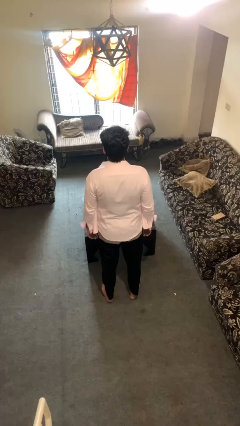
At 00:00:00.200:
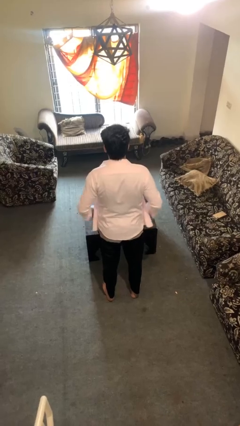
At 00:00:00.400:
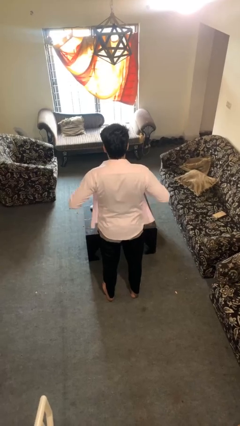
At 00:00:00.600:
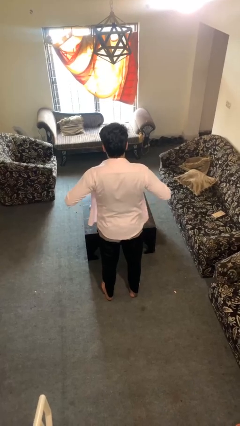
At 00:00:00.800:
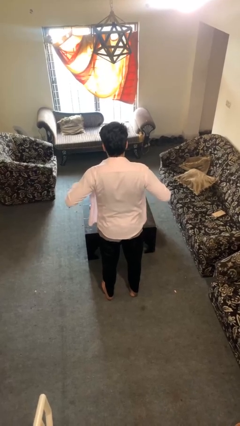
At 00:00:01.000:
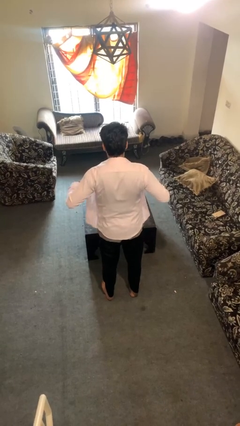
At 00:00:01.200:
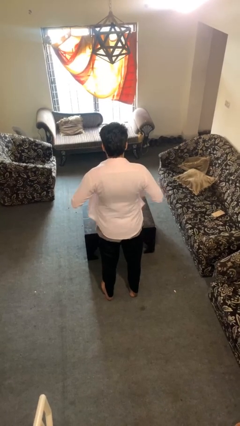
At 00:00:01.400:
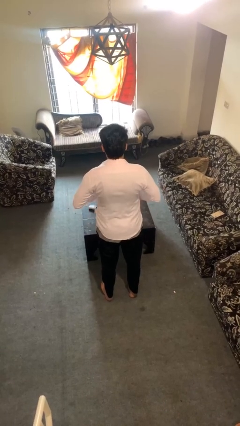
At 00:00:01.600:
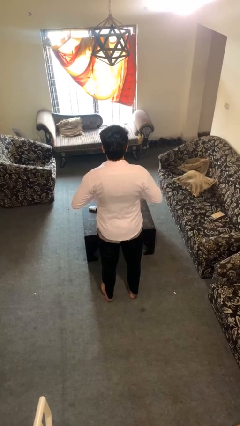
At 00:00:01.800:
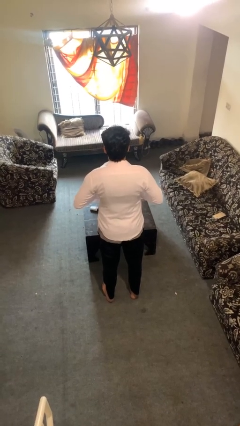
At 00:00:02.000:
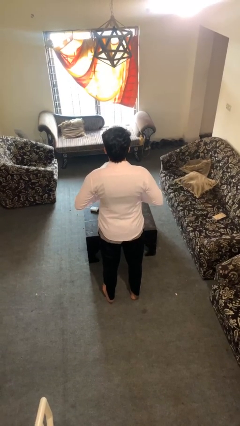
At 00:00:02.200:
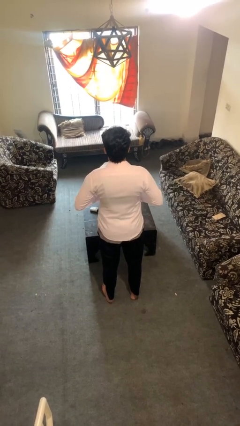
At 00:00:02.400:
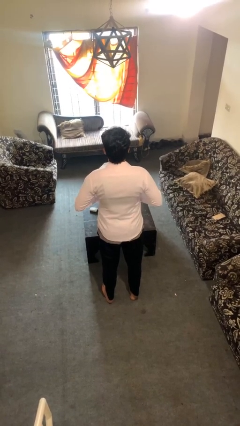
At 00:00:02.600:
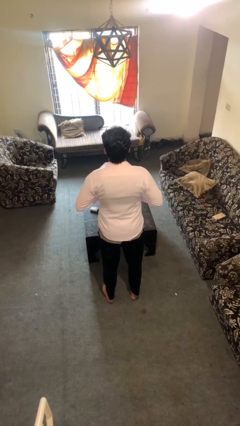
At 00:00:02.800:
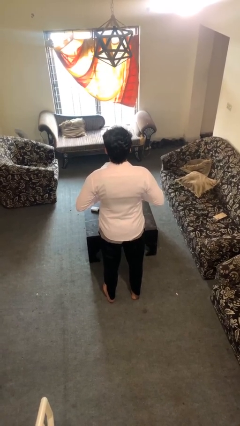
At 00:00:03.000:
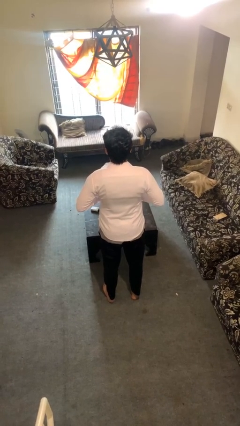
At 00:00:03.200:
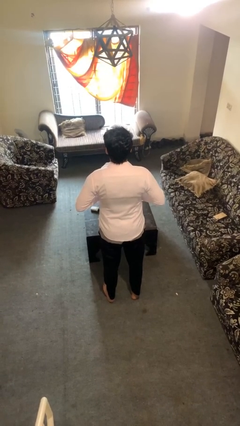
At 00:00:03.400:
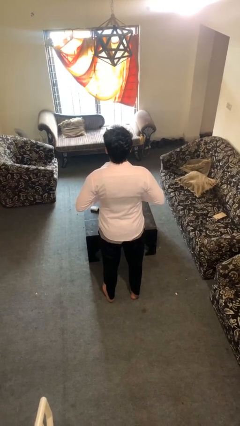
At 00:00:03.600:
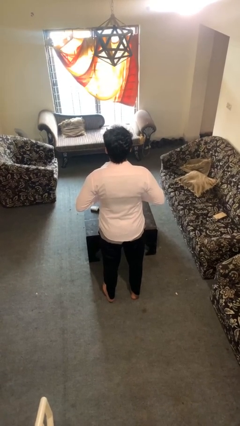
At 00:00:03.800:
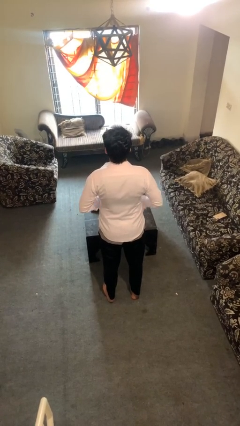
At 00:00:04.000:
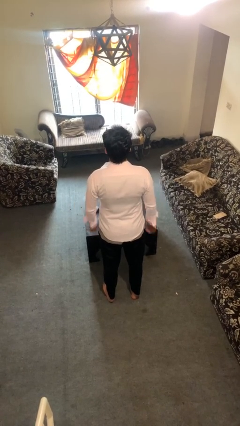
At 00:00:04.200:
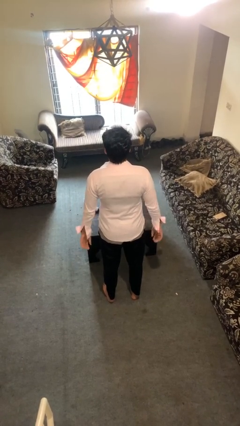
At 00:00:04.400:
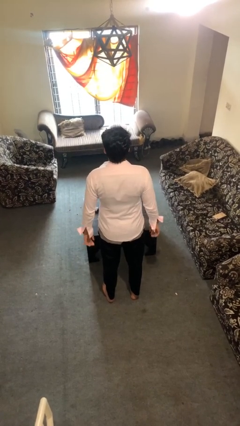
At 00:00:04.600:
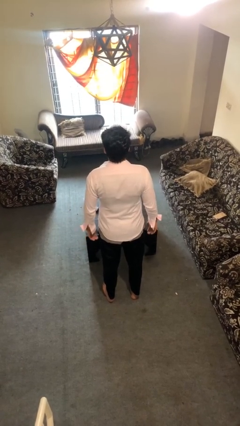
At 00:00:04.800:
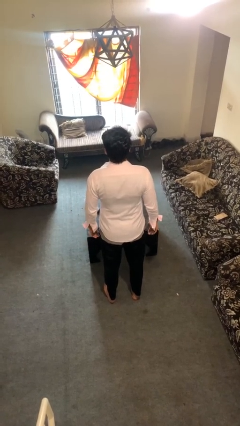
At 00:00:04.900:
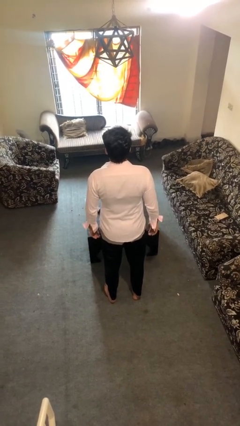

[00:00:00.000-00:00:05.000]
person buttons shirt

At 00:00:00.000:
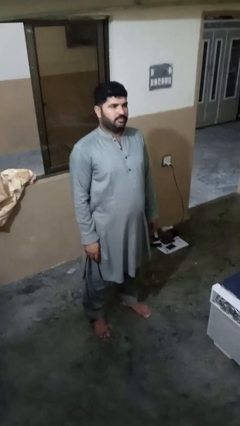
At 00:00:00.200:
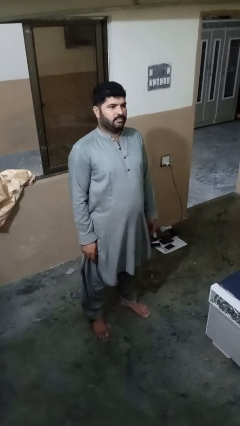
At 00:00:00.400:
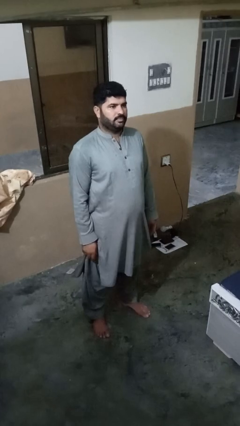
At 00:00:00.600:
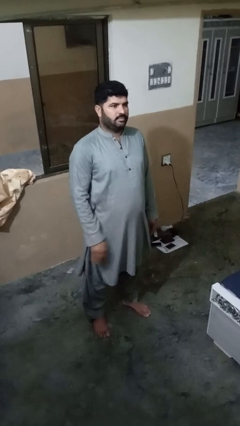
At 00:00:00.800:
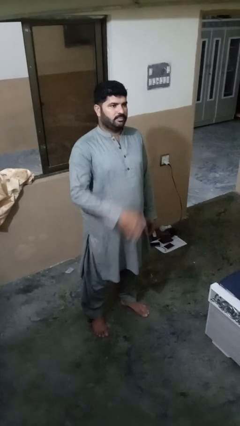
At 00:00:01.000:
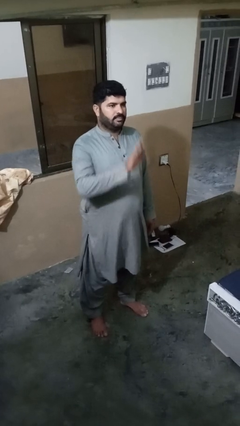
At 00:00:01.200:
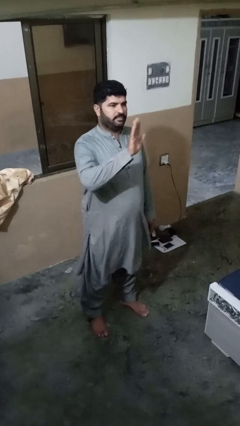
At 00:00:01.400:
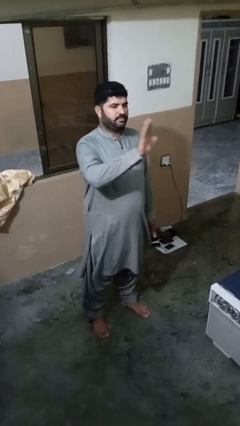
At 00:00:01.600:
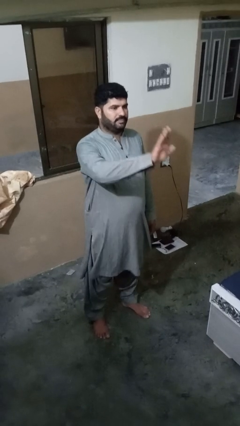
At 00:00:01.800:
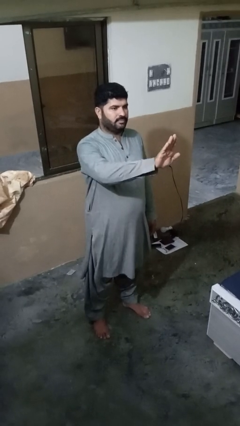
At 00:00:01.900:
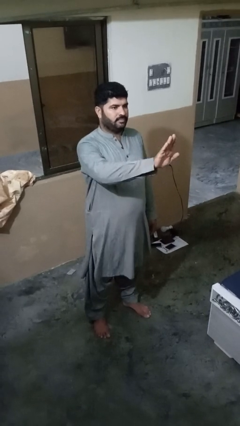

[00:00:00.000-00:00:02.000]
person gestures stop

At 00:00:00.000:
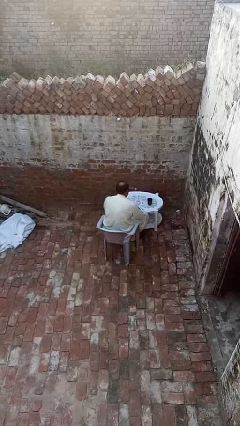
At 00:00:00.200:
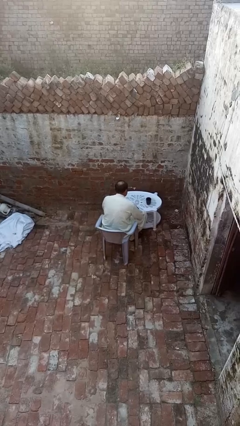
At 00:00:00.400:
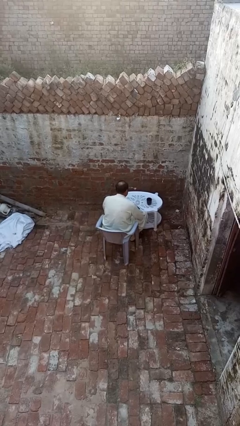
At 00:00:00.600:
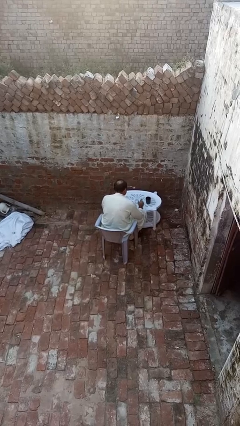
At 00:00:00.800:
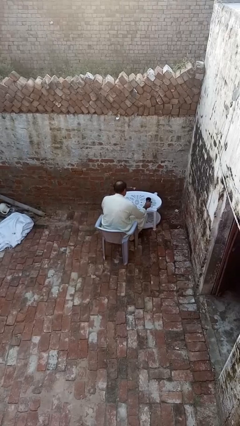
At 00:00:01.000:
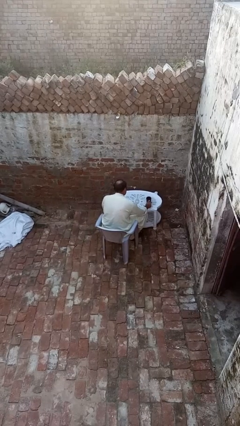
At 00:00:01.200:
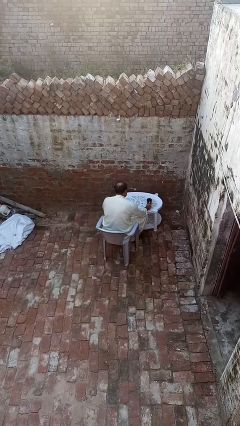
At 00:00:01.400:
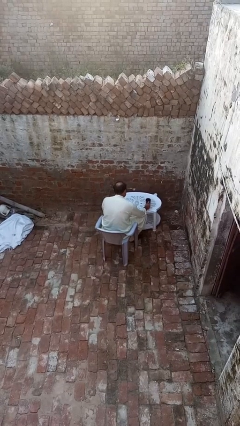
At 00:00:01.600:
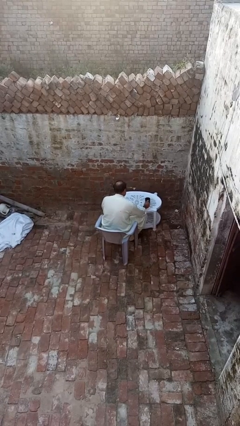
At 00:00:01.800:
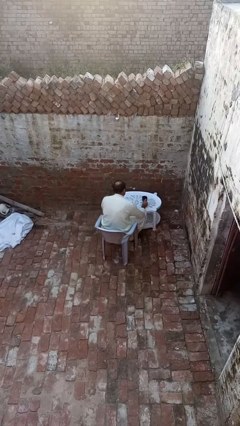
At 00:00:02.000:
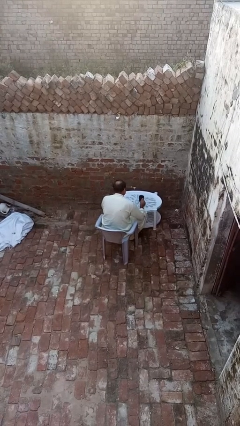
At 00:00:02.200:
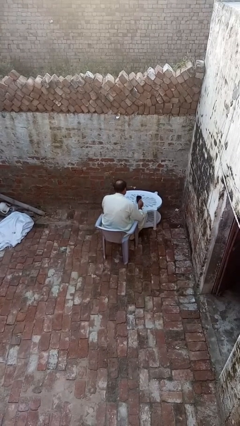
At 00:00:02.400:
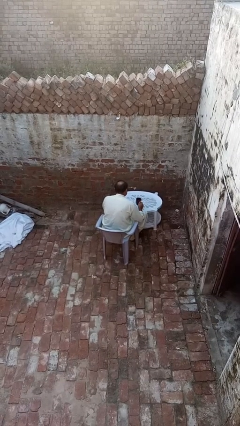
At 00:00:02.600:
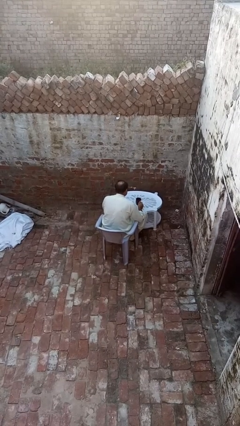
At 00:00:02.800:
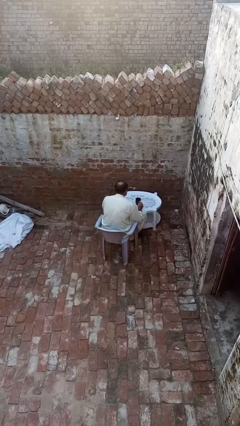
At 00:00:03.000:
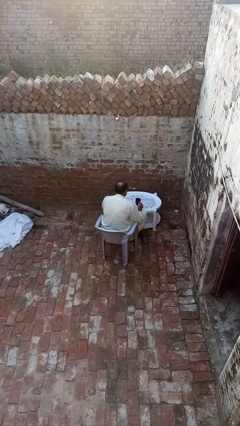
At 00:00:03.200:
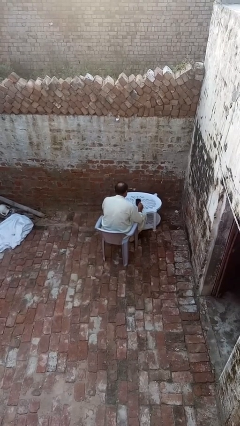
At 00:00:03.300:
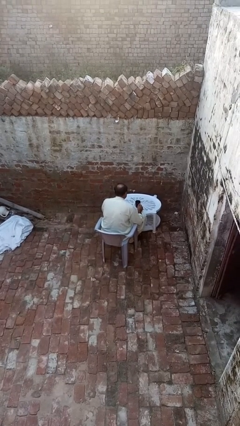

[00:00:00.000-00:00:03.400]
person picks up object from table

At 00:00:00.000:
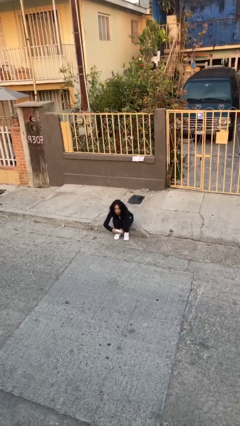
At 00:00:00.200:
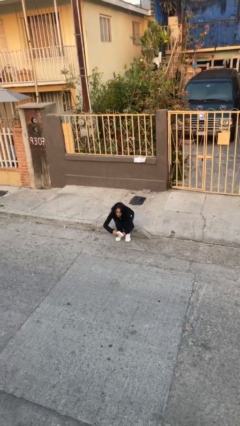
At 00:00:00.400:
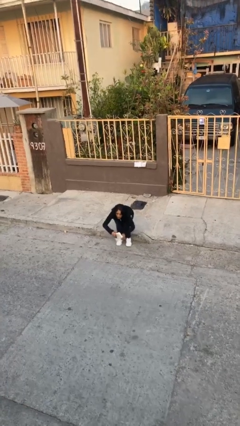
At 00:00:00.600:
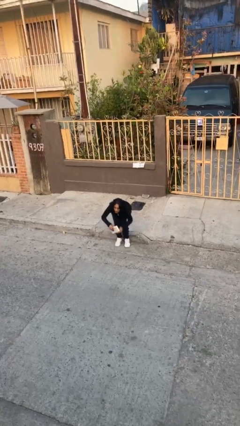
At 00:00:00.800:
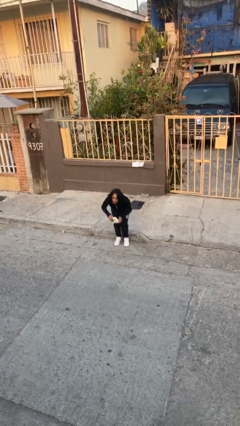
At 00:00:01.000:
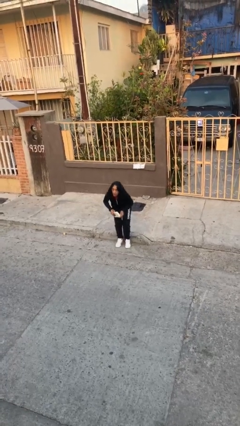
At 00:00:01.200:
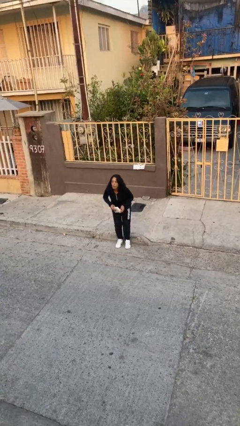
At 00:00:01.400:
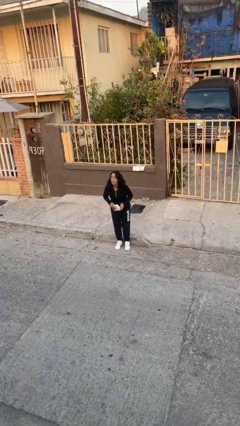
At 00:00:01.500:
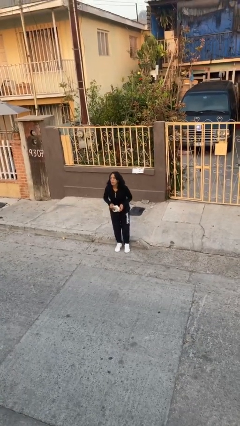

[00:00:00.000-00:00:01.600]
person stands up

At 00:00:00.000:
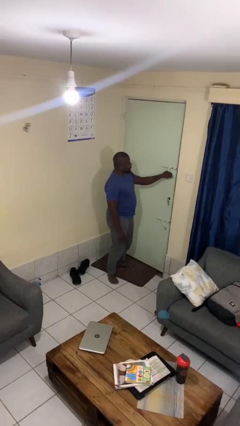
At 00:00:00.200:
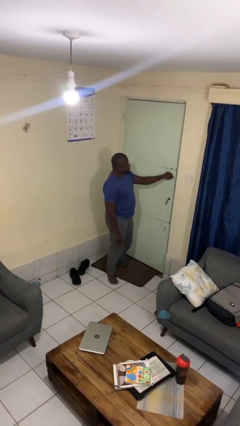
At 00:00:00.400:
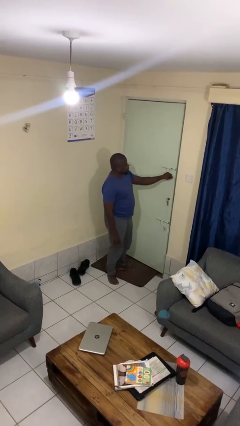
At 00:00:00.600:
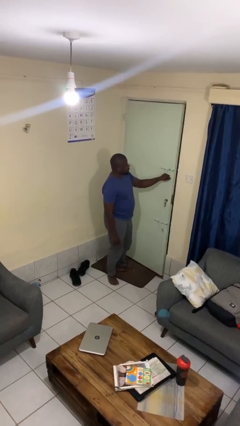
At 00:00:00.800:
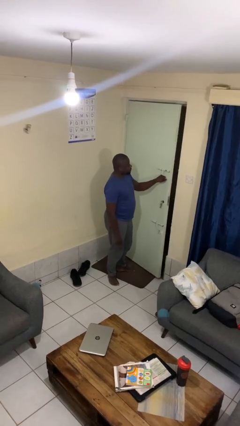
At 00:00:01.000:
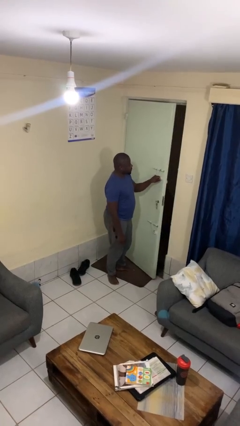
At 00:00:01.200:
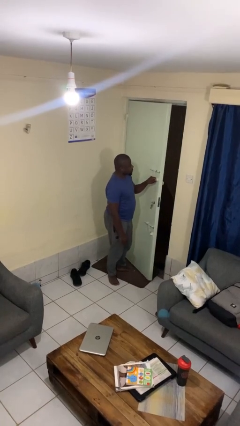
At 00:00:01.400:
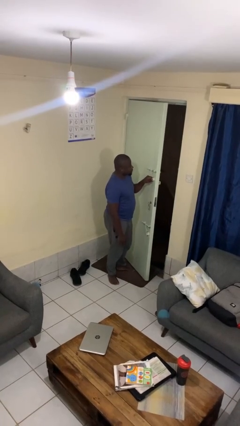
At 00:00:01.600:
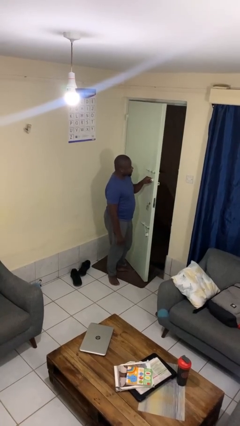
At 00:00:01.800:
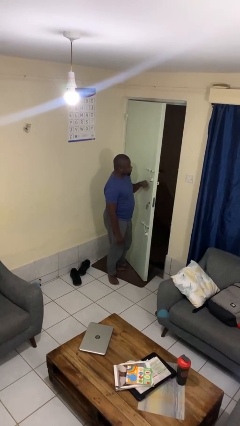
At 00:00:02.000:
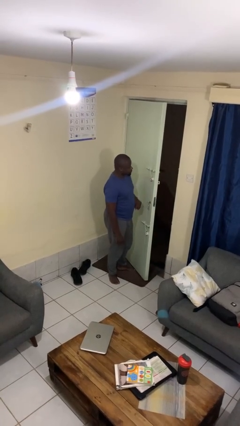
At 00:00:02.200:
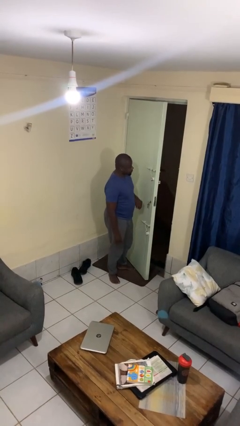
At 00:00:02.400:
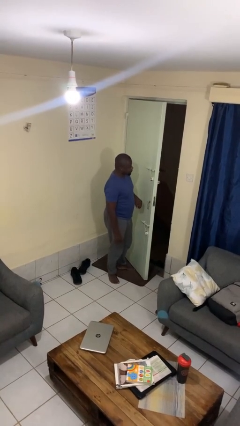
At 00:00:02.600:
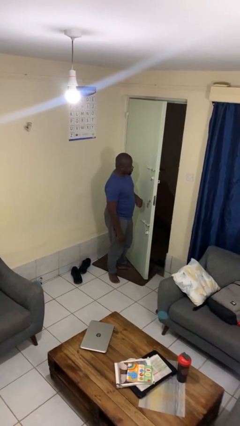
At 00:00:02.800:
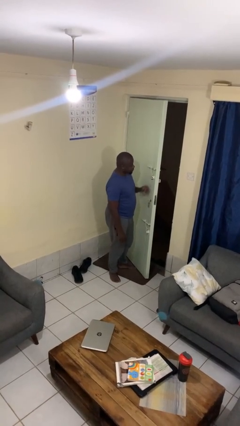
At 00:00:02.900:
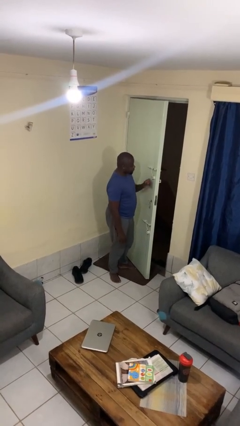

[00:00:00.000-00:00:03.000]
person opens facility door

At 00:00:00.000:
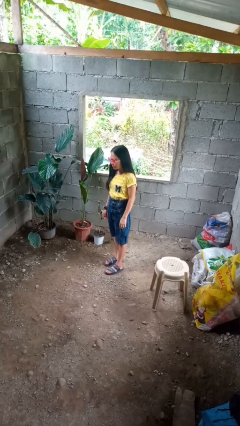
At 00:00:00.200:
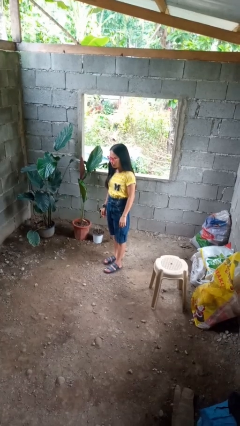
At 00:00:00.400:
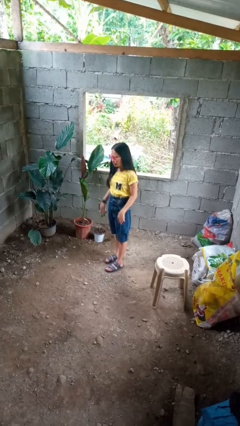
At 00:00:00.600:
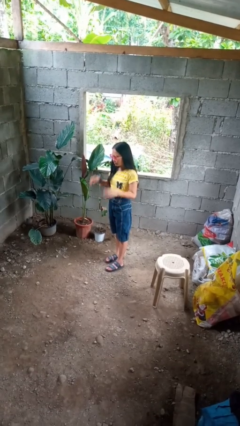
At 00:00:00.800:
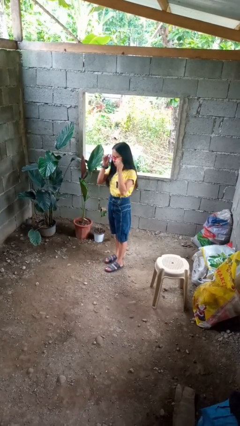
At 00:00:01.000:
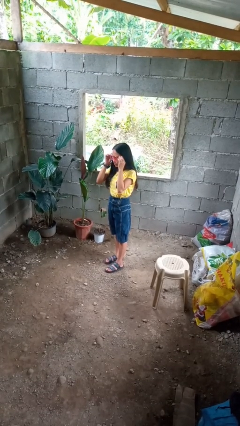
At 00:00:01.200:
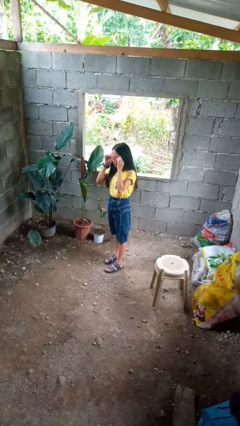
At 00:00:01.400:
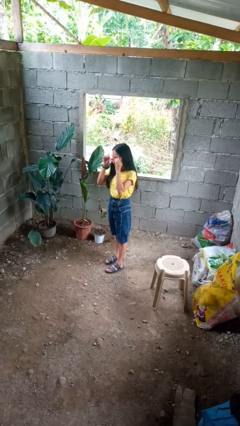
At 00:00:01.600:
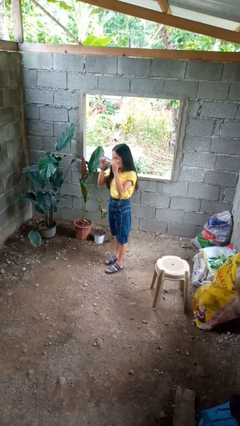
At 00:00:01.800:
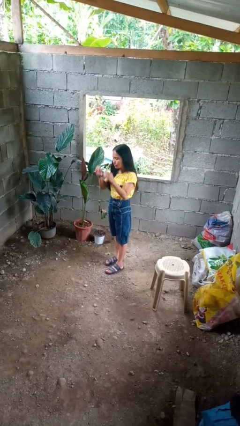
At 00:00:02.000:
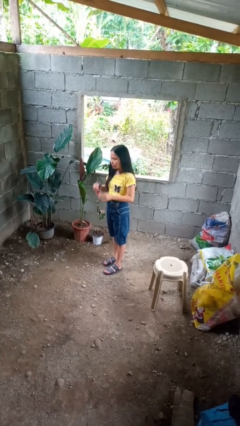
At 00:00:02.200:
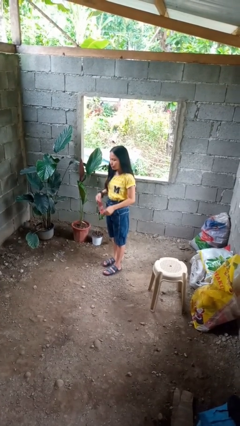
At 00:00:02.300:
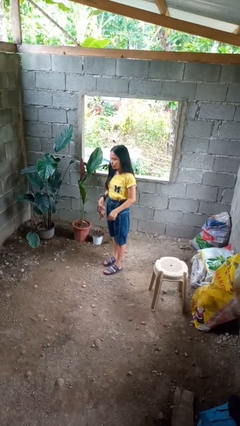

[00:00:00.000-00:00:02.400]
person takes off sunglasses
